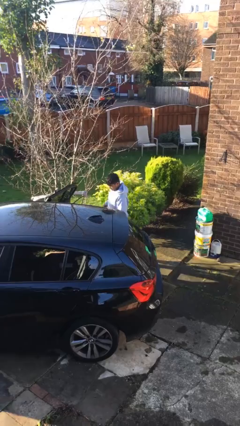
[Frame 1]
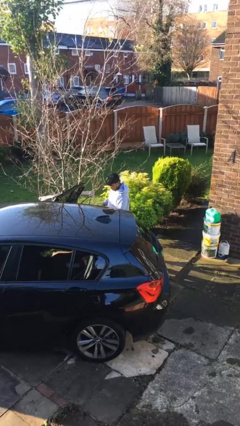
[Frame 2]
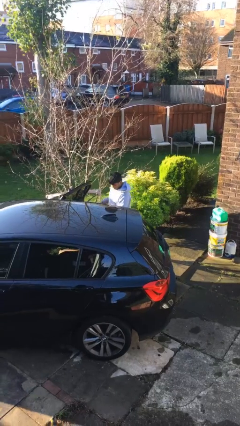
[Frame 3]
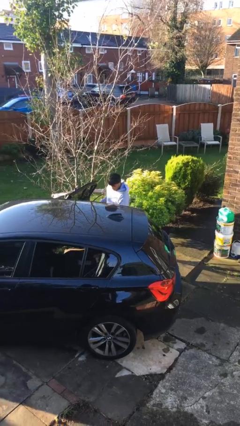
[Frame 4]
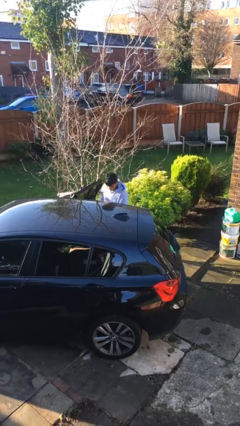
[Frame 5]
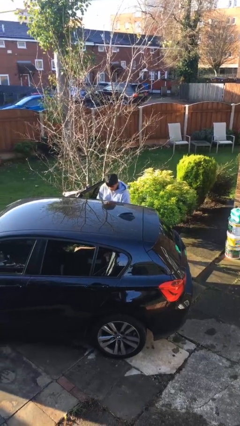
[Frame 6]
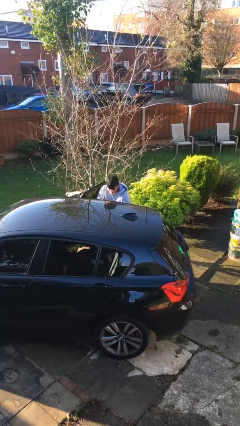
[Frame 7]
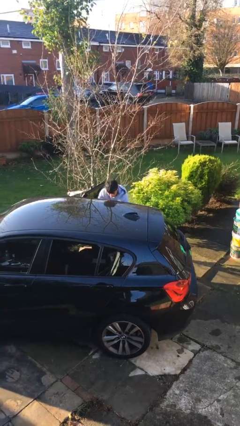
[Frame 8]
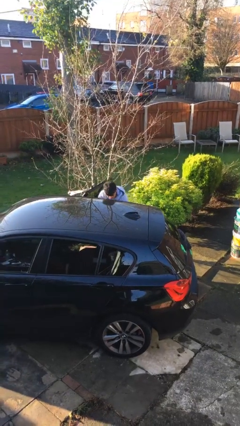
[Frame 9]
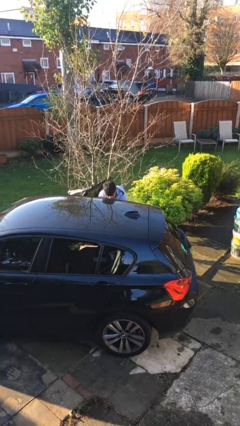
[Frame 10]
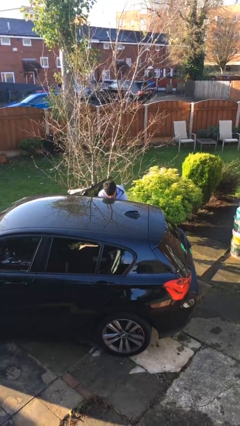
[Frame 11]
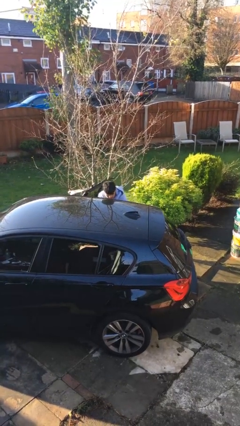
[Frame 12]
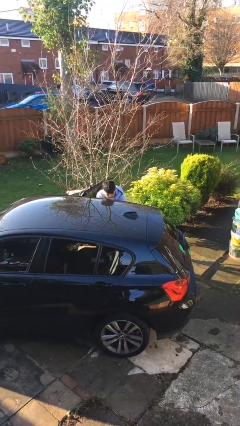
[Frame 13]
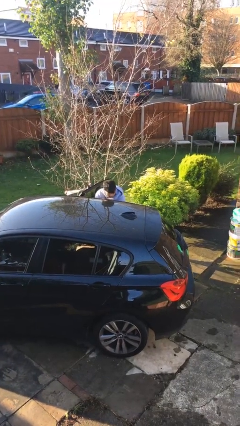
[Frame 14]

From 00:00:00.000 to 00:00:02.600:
person loads car

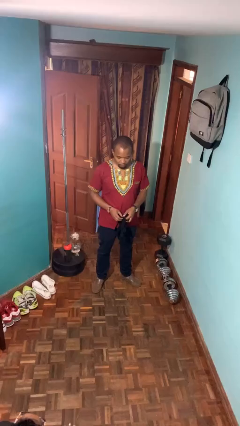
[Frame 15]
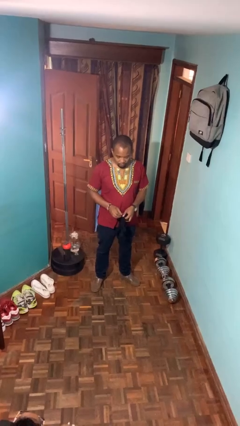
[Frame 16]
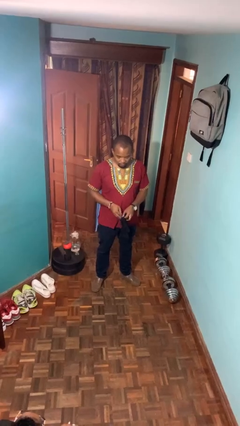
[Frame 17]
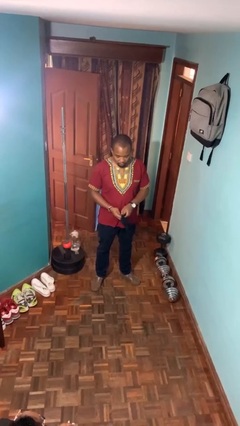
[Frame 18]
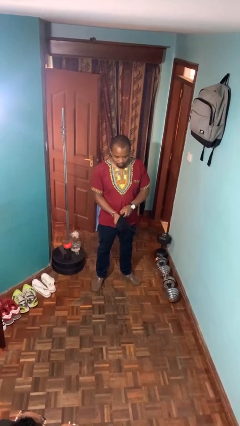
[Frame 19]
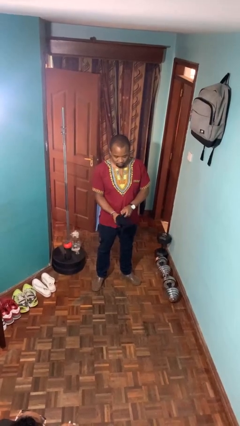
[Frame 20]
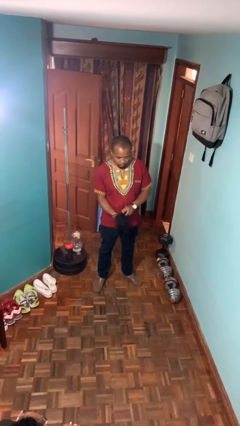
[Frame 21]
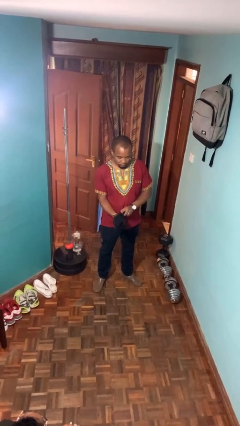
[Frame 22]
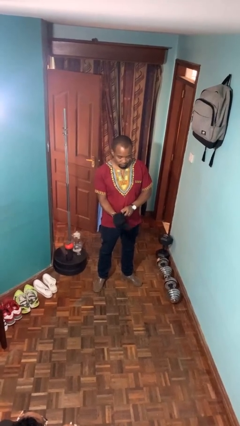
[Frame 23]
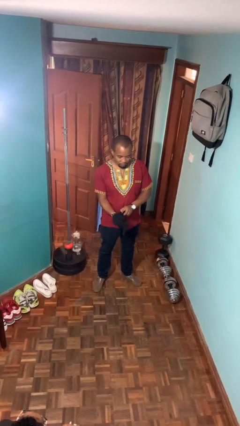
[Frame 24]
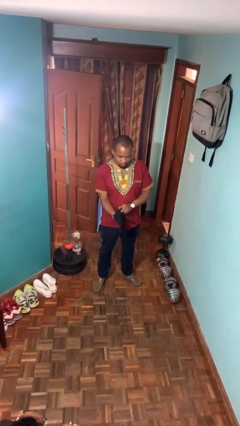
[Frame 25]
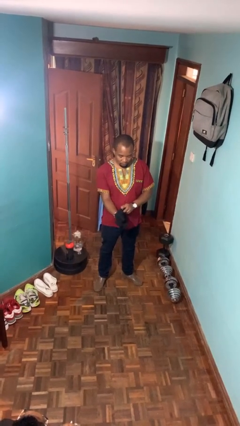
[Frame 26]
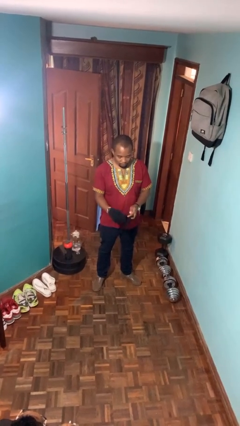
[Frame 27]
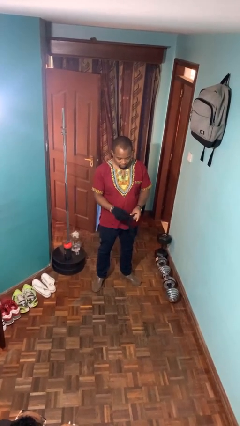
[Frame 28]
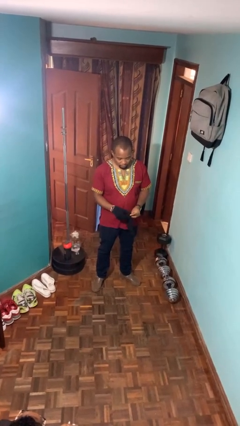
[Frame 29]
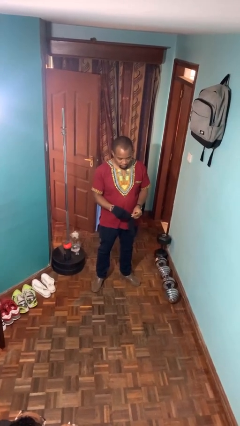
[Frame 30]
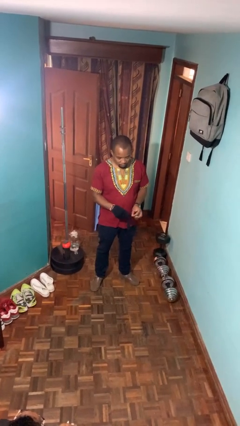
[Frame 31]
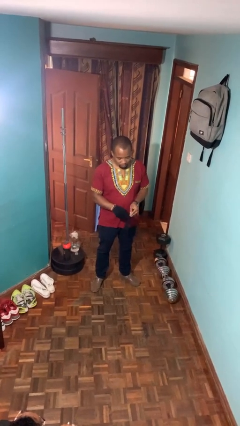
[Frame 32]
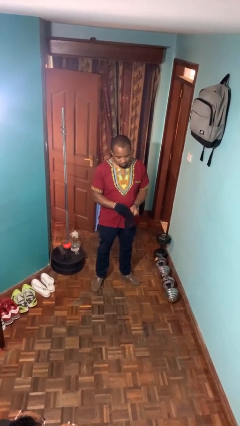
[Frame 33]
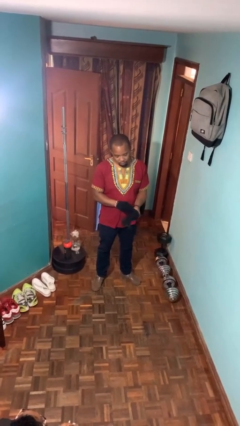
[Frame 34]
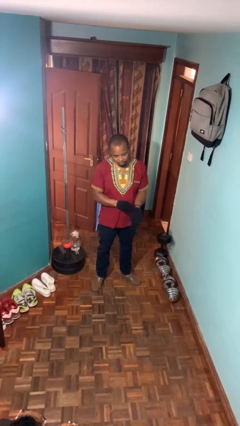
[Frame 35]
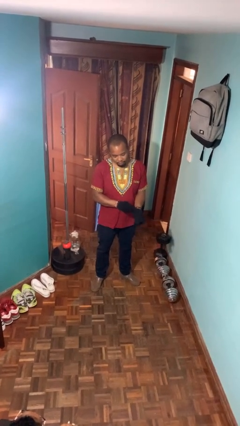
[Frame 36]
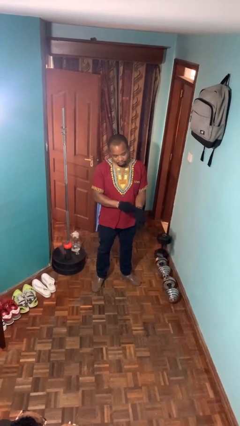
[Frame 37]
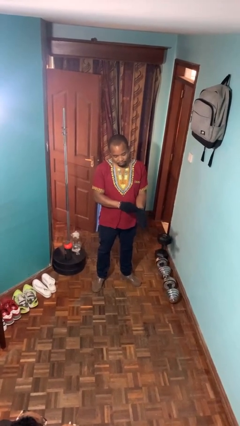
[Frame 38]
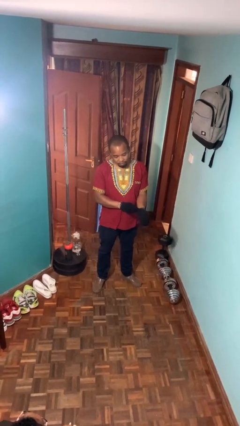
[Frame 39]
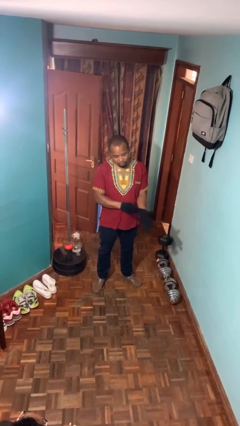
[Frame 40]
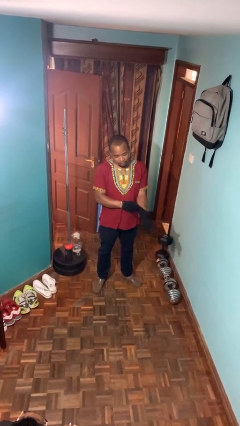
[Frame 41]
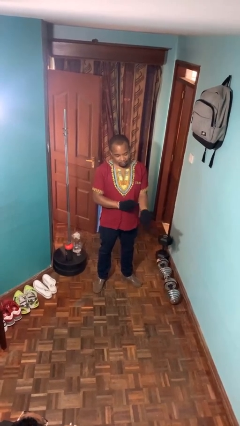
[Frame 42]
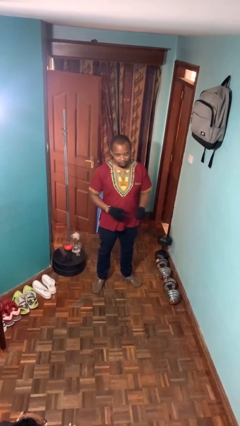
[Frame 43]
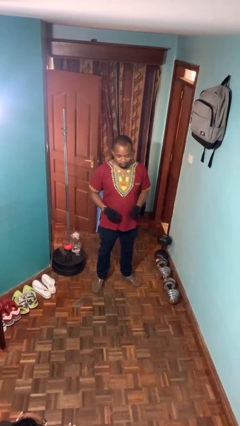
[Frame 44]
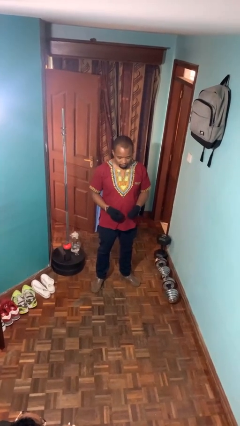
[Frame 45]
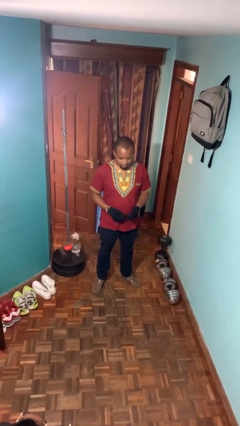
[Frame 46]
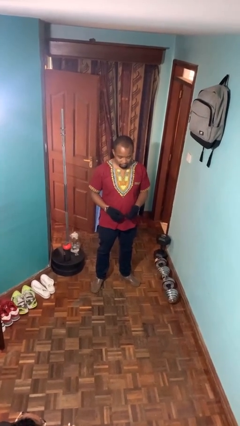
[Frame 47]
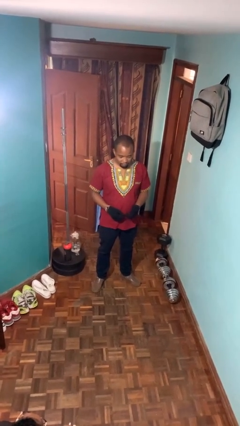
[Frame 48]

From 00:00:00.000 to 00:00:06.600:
person puts on gloves

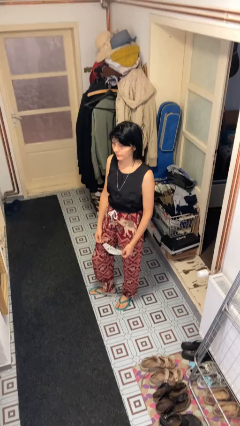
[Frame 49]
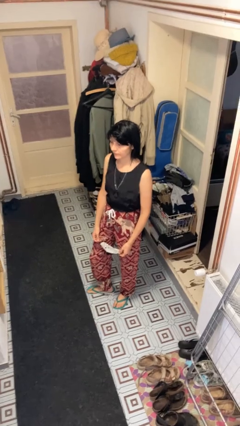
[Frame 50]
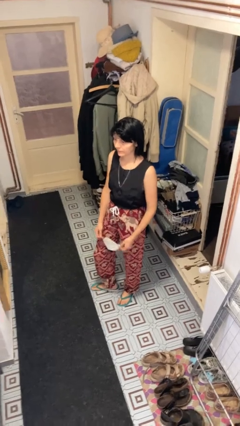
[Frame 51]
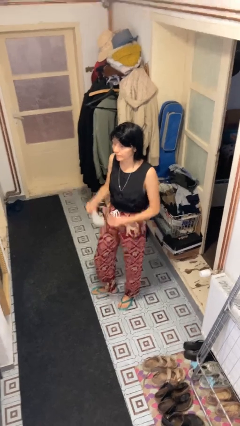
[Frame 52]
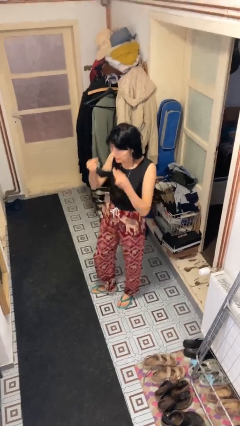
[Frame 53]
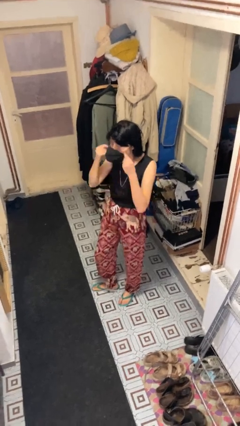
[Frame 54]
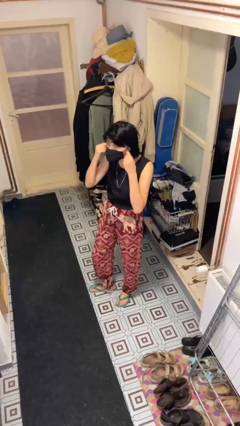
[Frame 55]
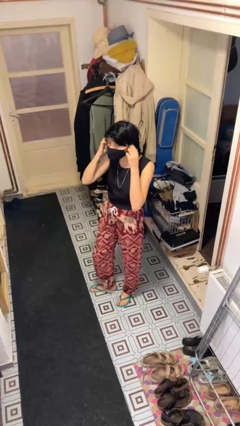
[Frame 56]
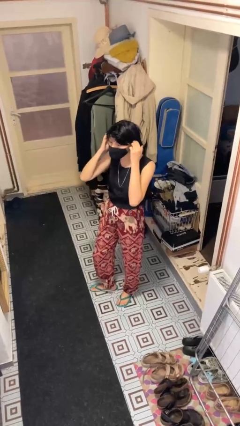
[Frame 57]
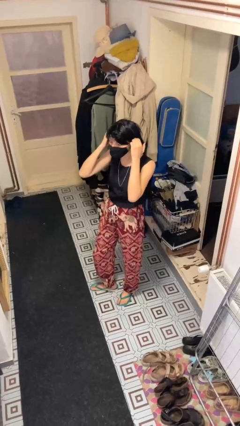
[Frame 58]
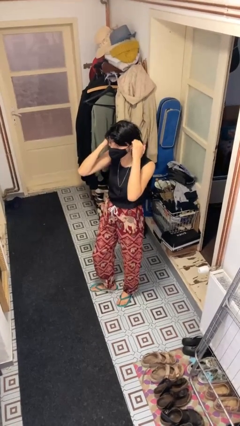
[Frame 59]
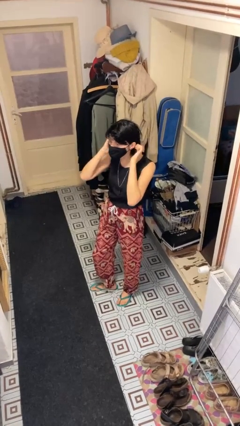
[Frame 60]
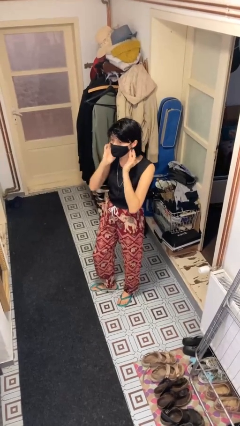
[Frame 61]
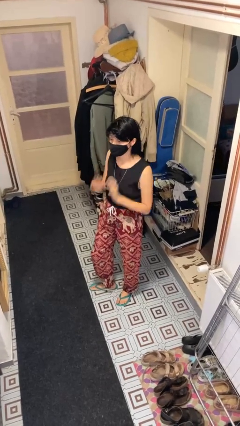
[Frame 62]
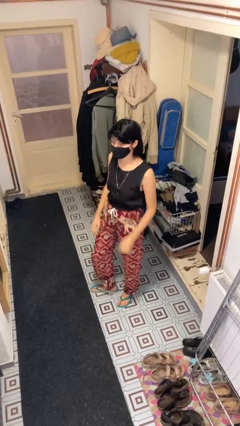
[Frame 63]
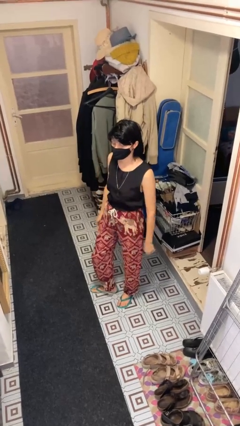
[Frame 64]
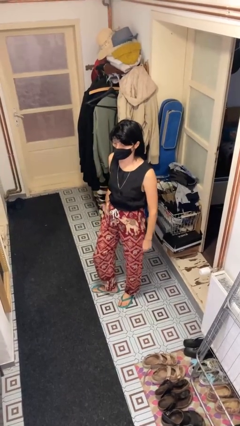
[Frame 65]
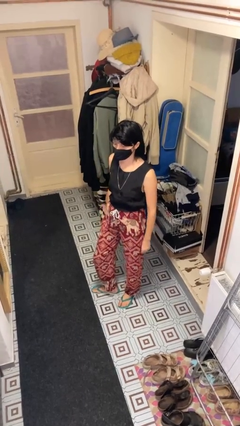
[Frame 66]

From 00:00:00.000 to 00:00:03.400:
person puts on facemask

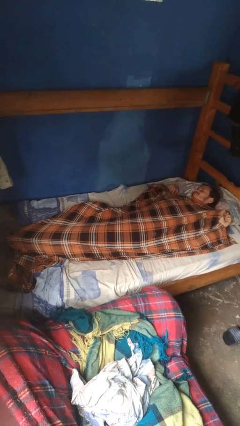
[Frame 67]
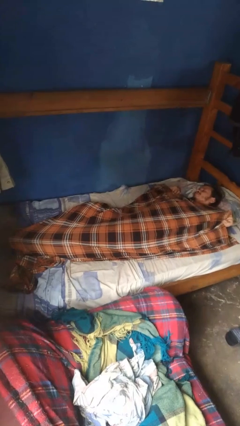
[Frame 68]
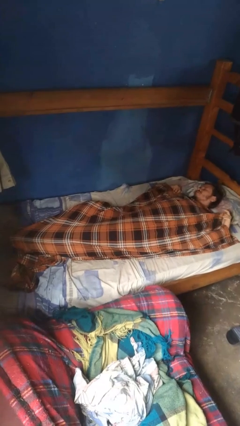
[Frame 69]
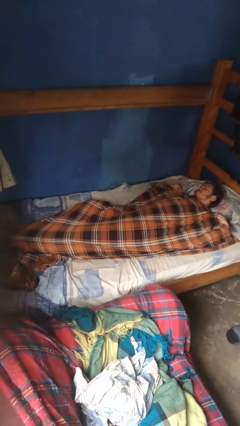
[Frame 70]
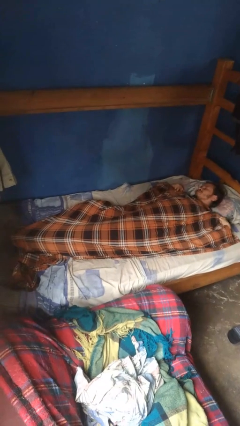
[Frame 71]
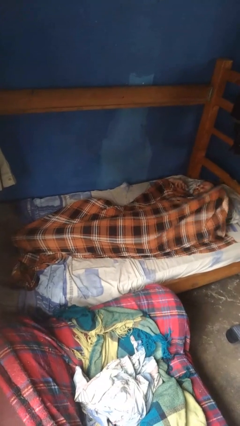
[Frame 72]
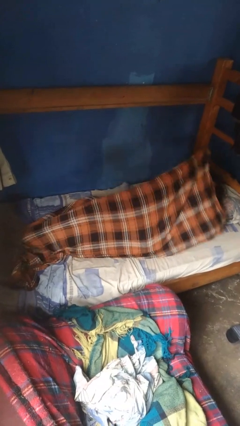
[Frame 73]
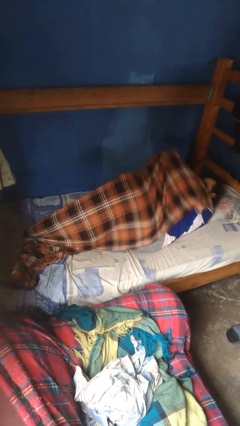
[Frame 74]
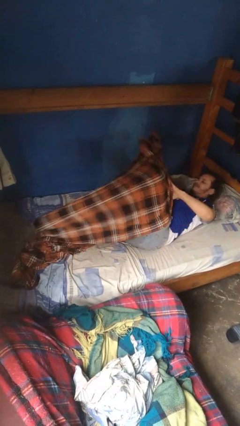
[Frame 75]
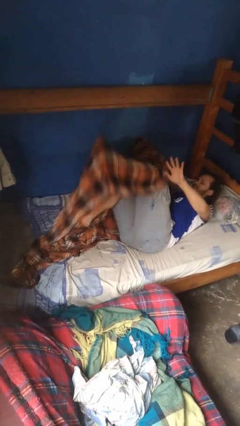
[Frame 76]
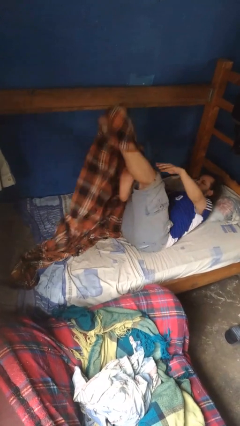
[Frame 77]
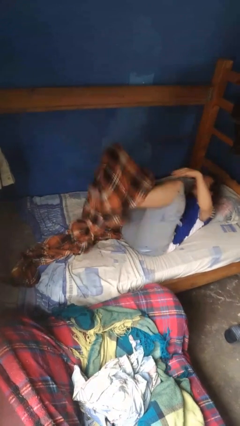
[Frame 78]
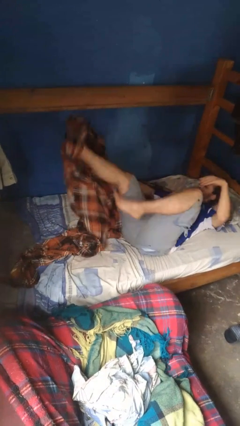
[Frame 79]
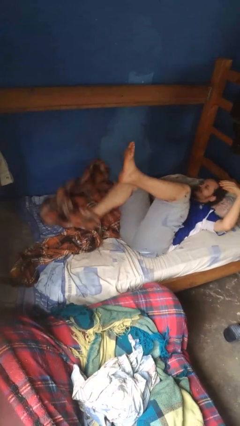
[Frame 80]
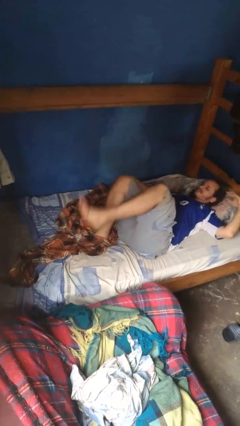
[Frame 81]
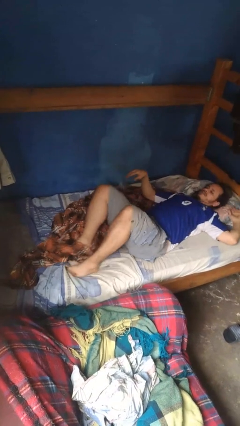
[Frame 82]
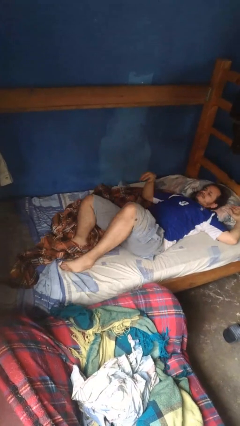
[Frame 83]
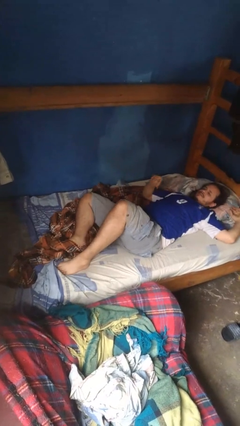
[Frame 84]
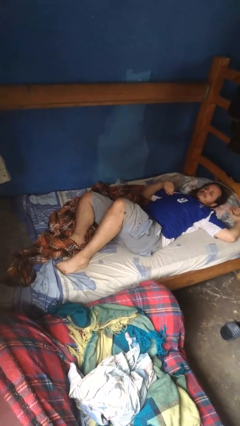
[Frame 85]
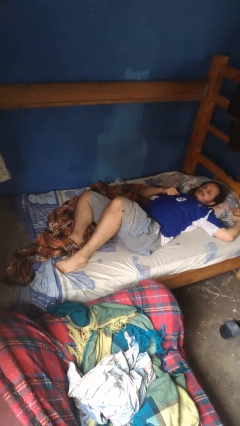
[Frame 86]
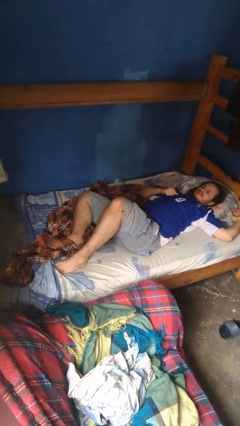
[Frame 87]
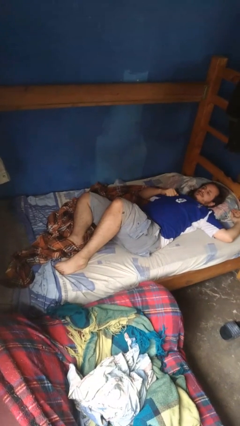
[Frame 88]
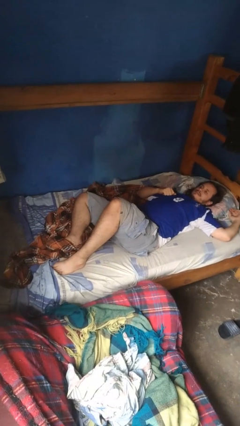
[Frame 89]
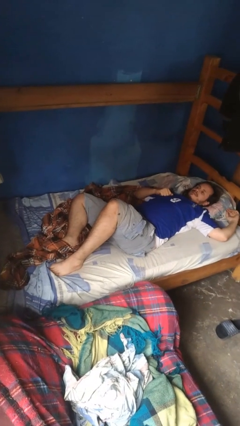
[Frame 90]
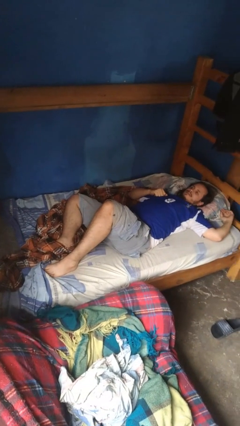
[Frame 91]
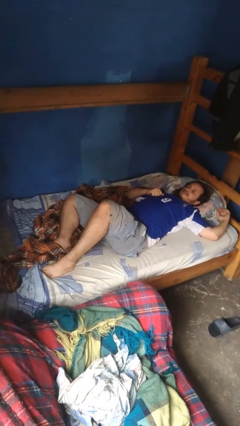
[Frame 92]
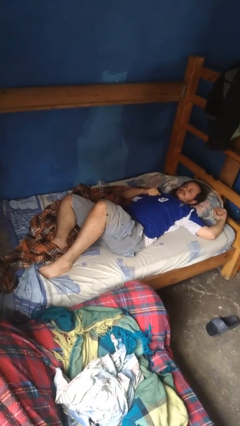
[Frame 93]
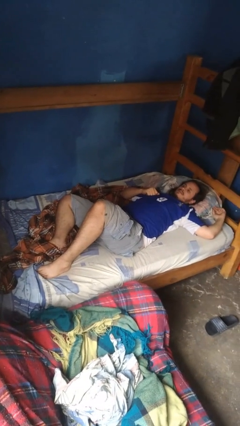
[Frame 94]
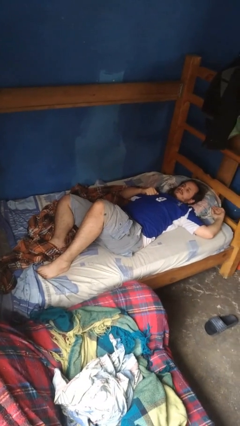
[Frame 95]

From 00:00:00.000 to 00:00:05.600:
person uncovers with bedsheets
